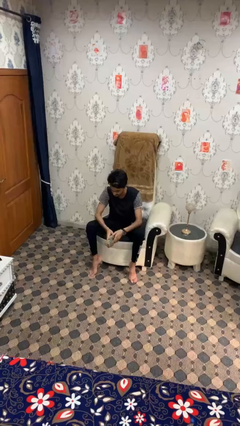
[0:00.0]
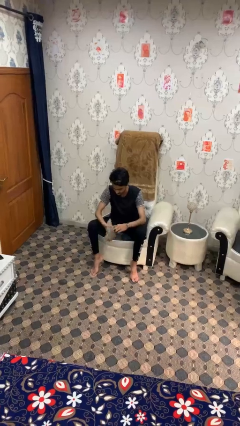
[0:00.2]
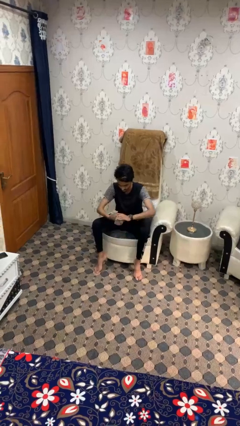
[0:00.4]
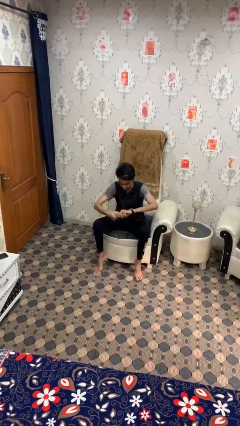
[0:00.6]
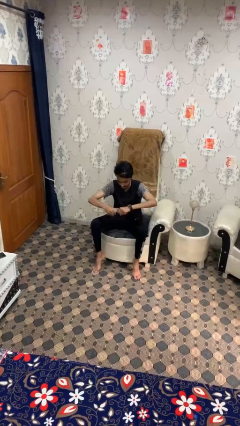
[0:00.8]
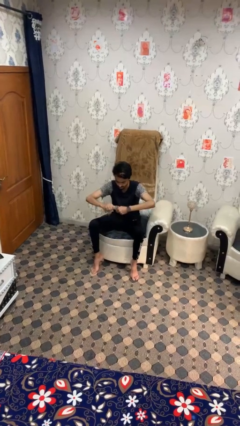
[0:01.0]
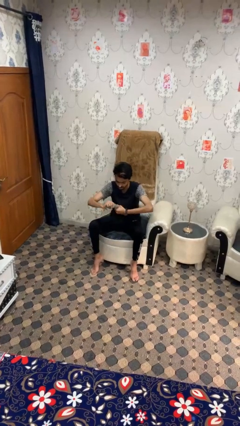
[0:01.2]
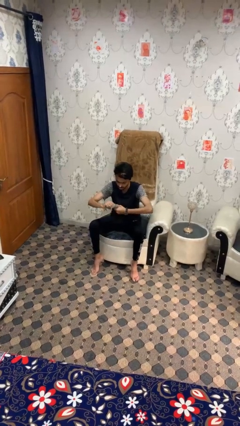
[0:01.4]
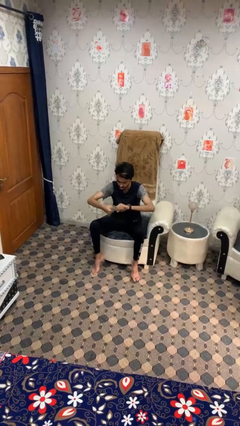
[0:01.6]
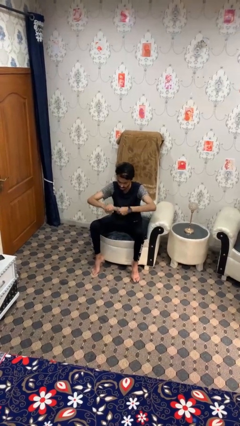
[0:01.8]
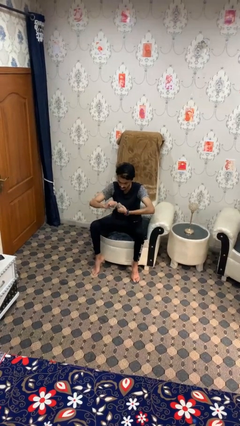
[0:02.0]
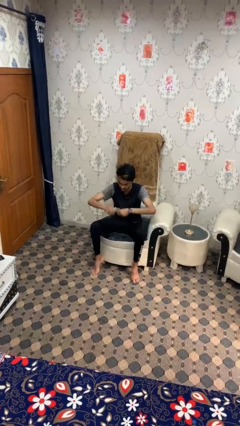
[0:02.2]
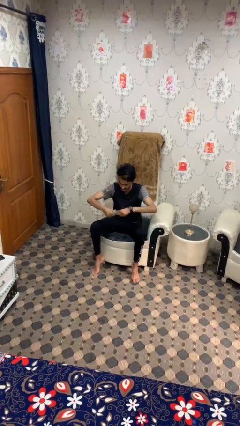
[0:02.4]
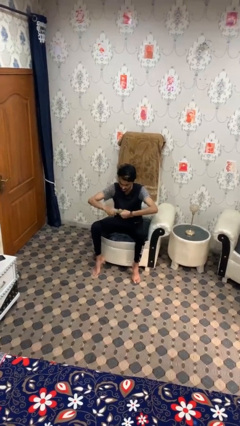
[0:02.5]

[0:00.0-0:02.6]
person squeezes object

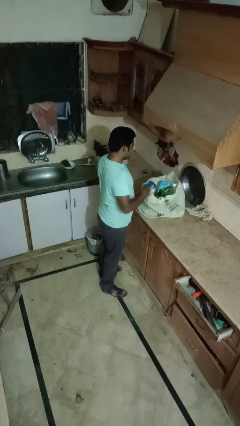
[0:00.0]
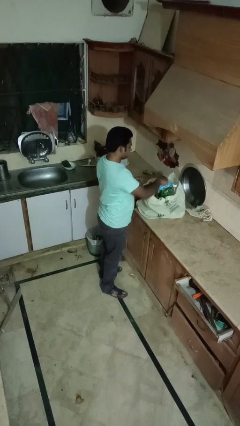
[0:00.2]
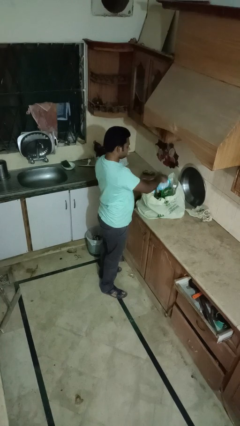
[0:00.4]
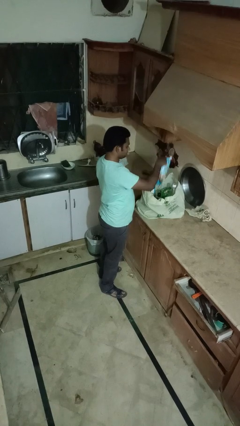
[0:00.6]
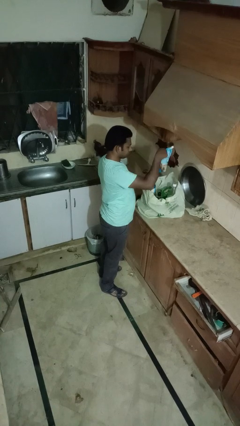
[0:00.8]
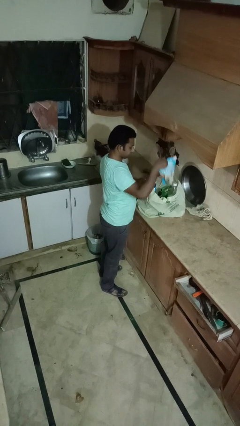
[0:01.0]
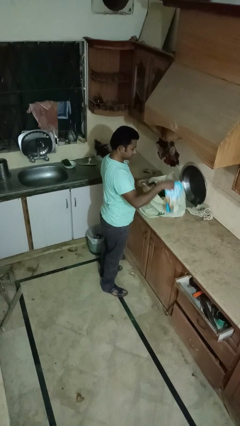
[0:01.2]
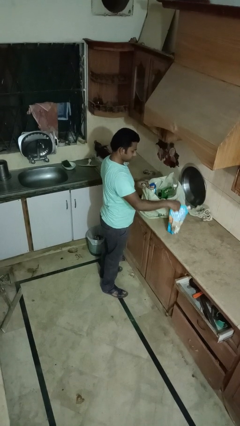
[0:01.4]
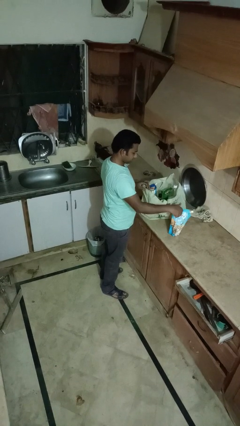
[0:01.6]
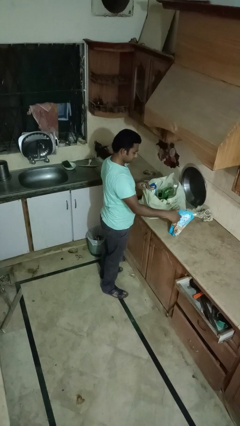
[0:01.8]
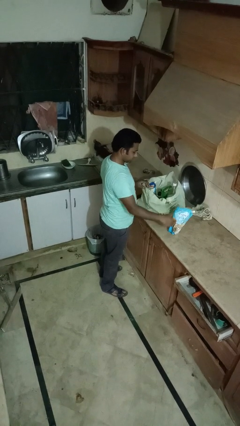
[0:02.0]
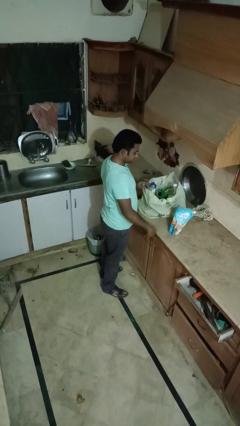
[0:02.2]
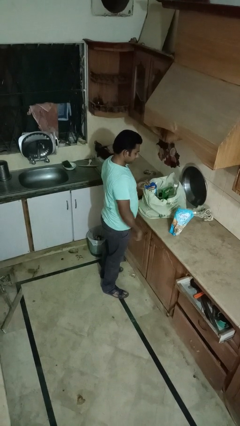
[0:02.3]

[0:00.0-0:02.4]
person takes object from bag

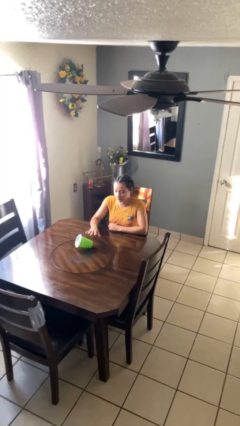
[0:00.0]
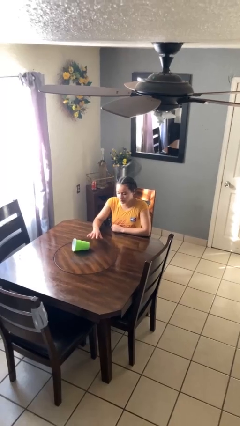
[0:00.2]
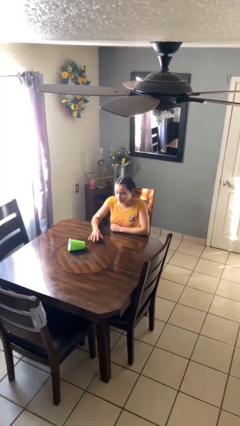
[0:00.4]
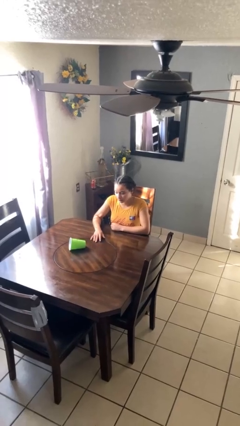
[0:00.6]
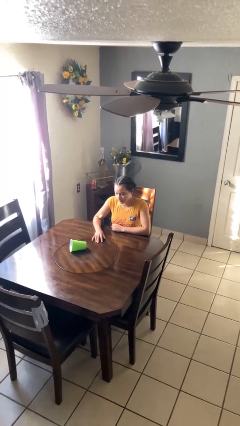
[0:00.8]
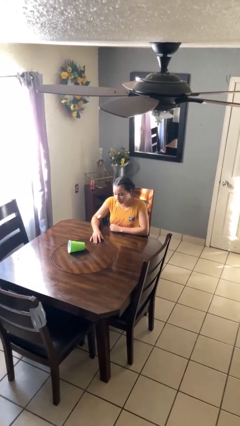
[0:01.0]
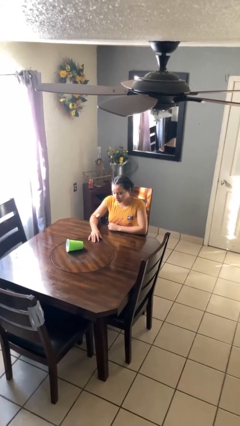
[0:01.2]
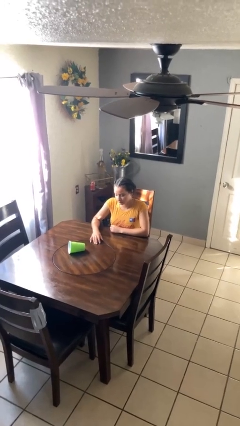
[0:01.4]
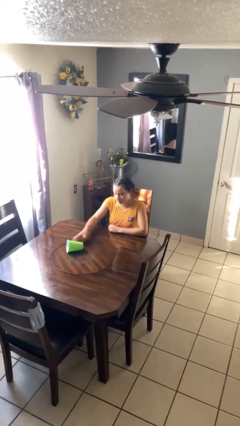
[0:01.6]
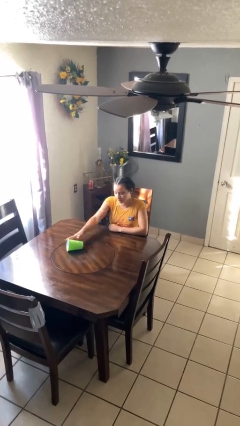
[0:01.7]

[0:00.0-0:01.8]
person knocks over glass

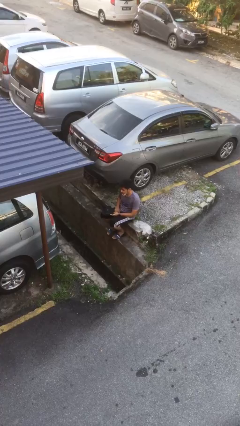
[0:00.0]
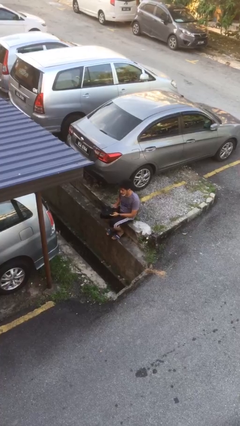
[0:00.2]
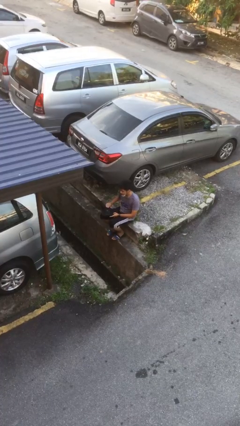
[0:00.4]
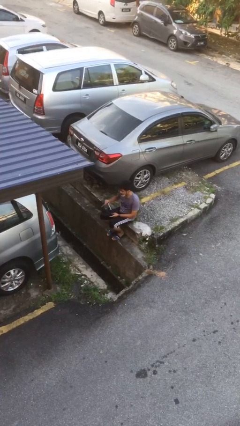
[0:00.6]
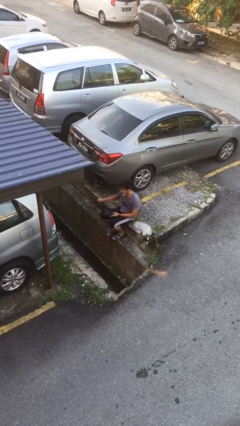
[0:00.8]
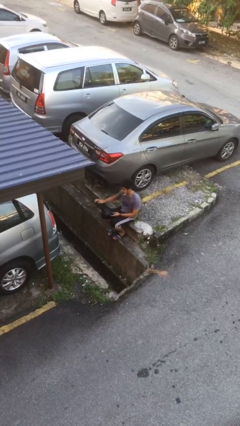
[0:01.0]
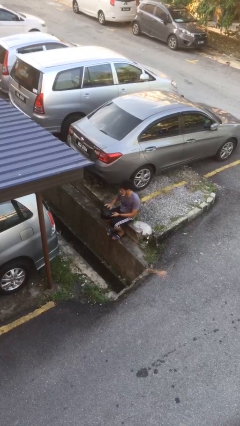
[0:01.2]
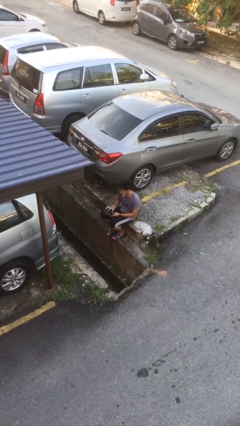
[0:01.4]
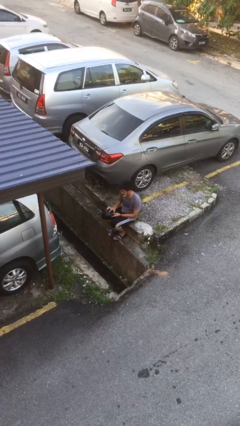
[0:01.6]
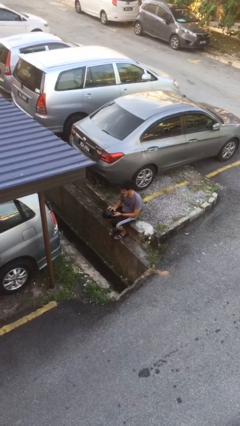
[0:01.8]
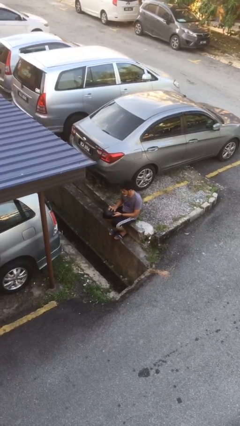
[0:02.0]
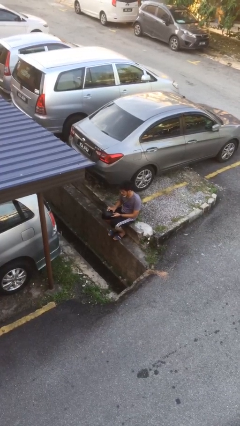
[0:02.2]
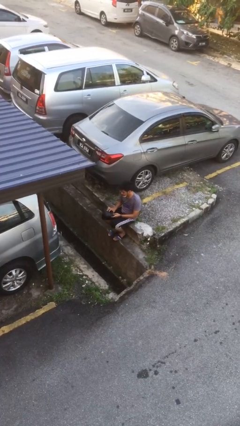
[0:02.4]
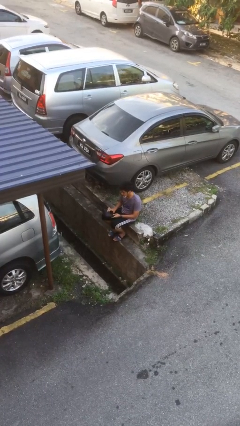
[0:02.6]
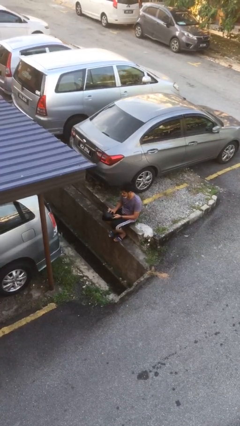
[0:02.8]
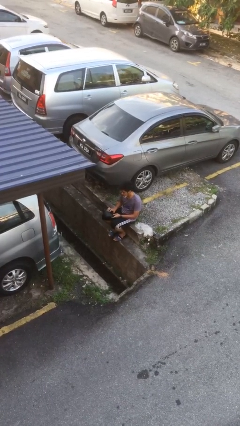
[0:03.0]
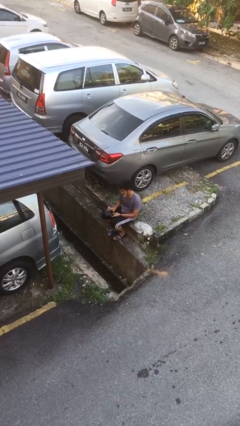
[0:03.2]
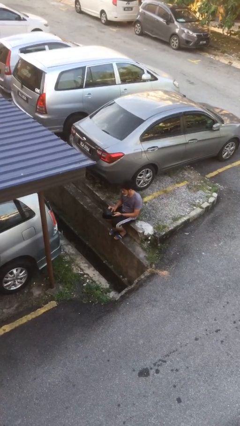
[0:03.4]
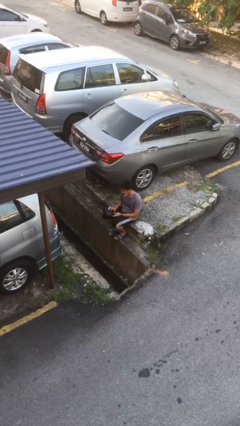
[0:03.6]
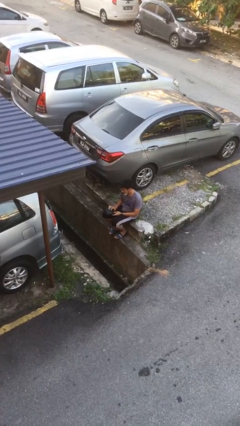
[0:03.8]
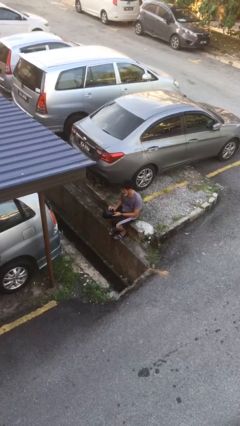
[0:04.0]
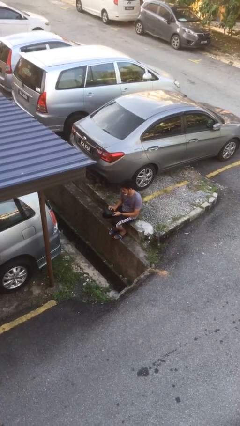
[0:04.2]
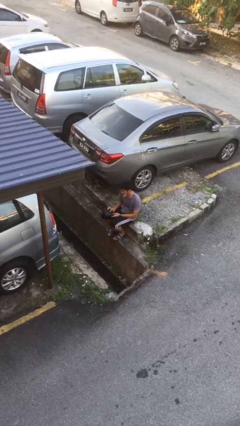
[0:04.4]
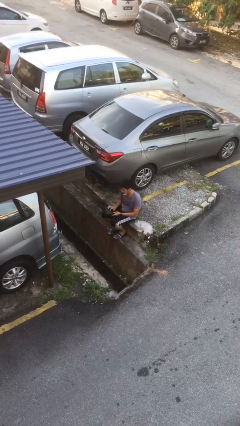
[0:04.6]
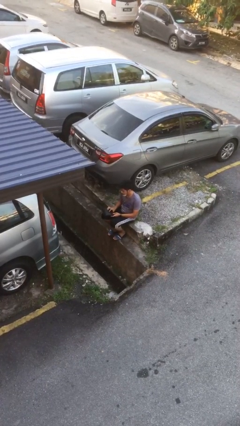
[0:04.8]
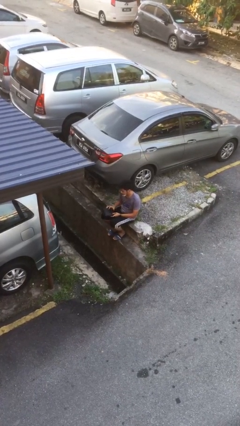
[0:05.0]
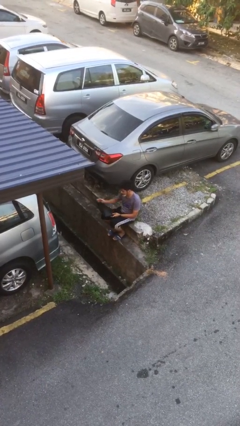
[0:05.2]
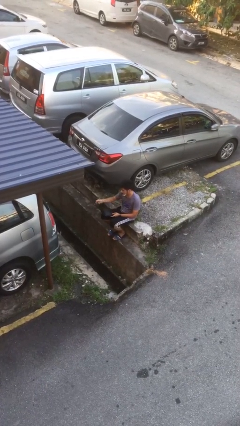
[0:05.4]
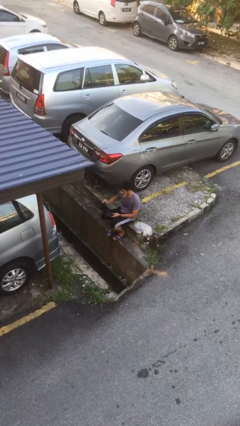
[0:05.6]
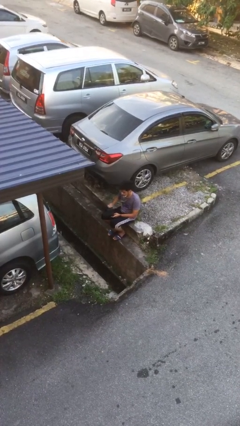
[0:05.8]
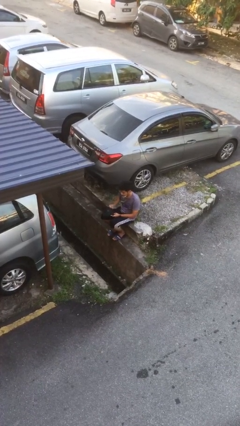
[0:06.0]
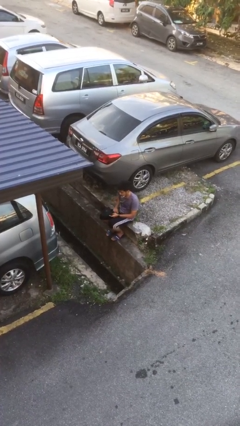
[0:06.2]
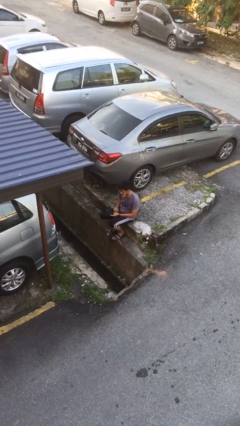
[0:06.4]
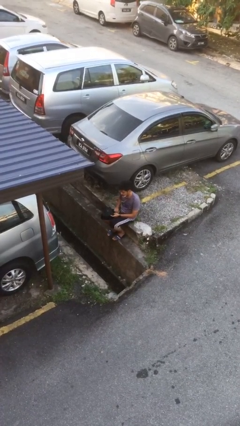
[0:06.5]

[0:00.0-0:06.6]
person interacts with laptop

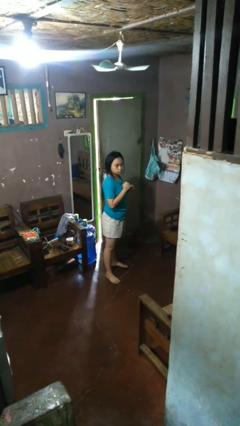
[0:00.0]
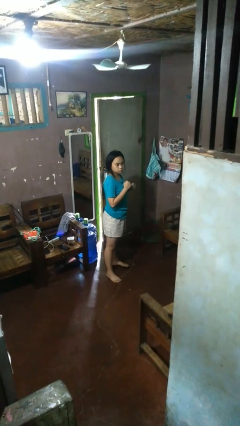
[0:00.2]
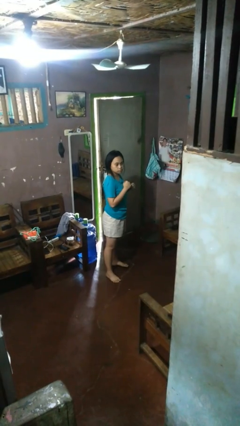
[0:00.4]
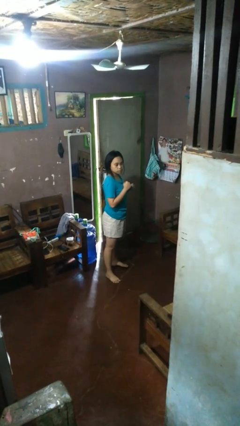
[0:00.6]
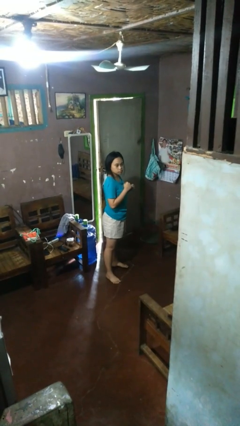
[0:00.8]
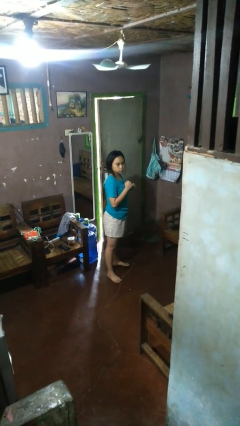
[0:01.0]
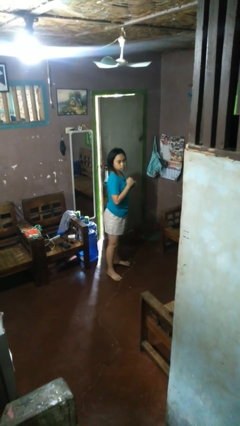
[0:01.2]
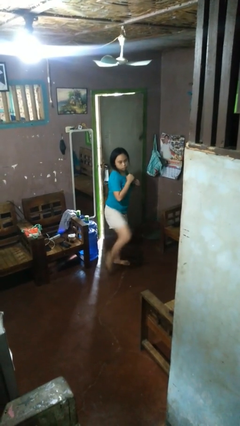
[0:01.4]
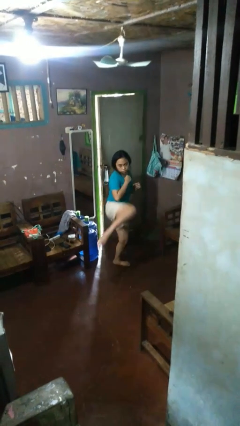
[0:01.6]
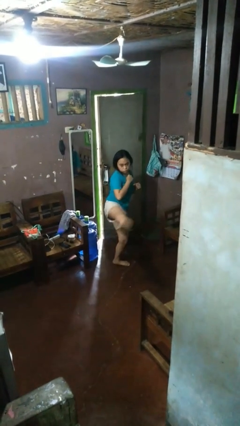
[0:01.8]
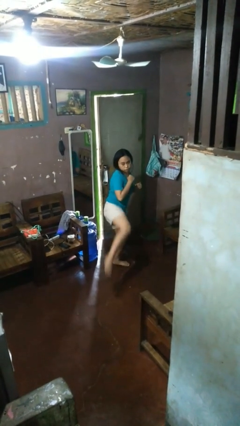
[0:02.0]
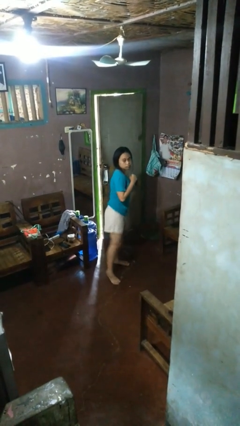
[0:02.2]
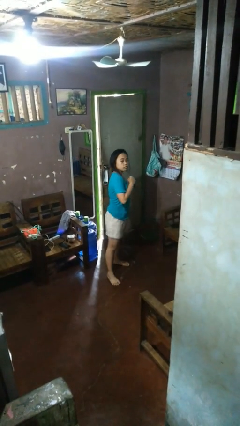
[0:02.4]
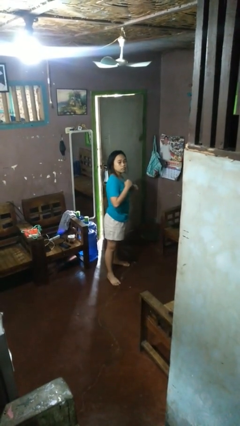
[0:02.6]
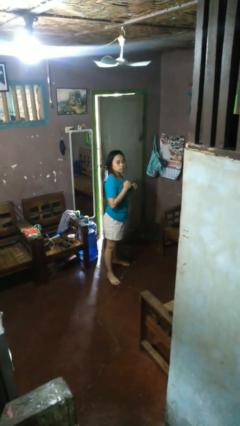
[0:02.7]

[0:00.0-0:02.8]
person karate kicks

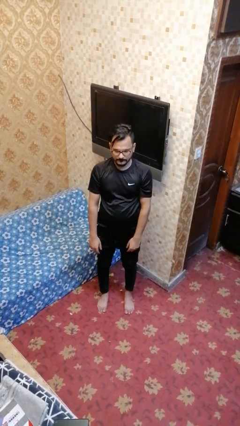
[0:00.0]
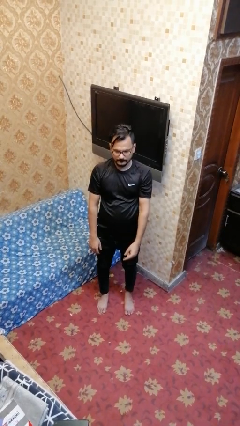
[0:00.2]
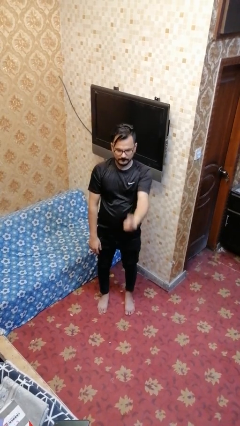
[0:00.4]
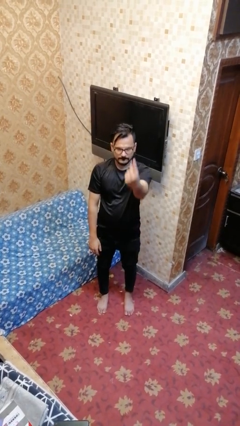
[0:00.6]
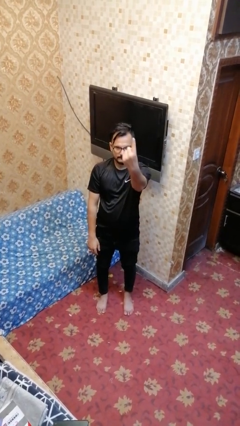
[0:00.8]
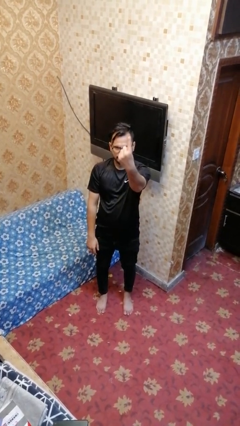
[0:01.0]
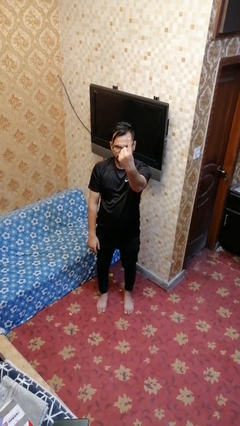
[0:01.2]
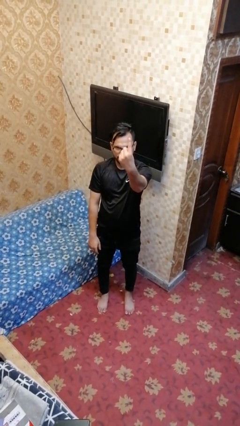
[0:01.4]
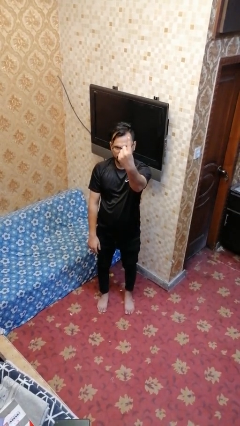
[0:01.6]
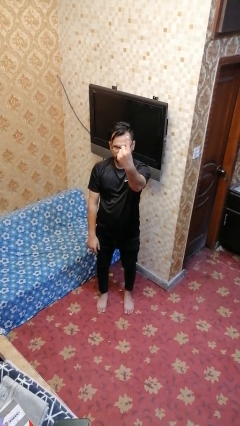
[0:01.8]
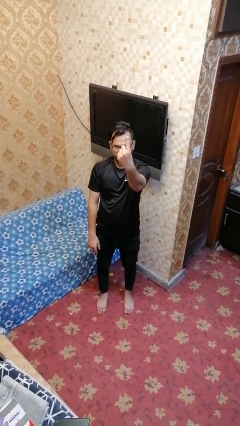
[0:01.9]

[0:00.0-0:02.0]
person gestures number one
